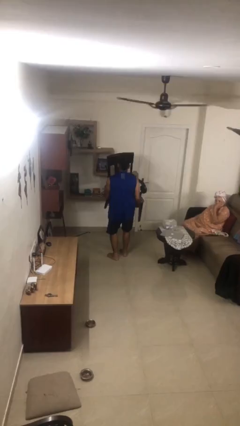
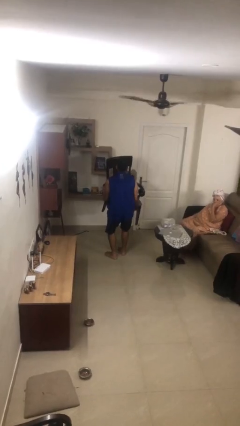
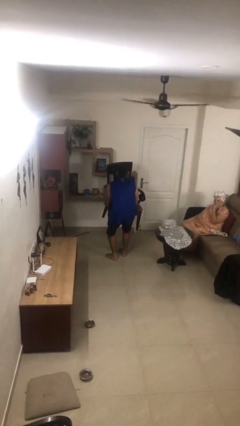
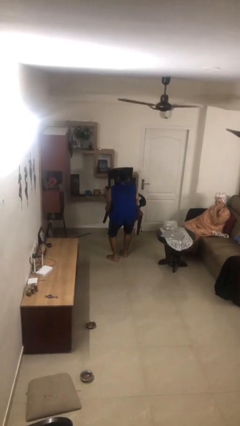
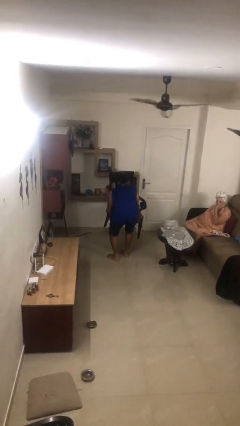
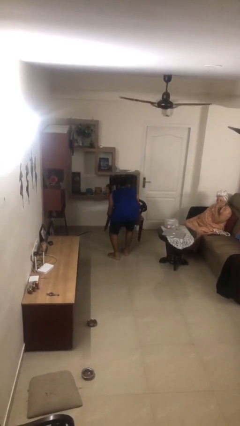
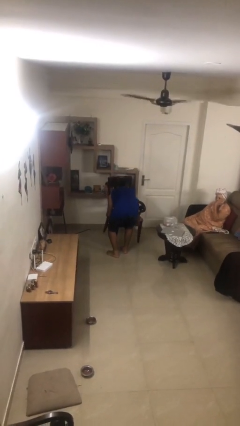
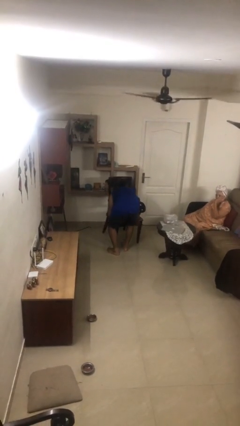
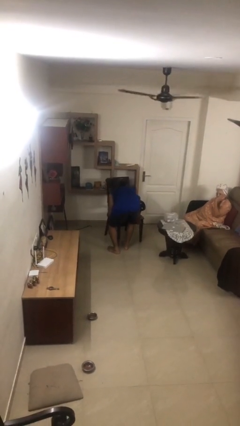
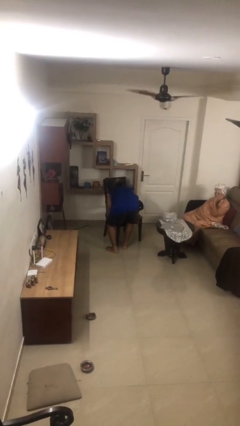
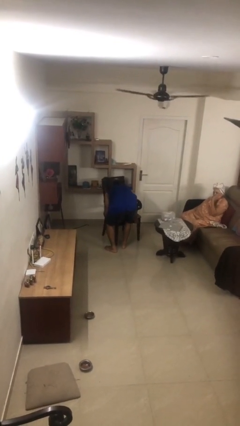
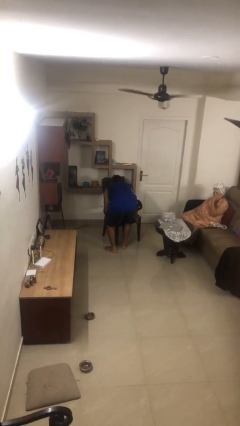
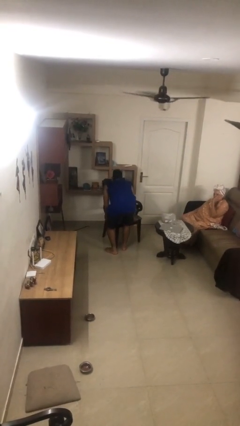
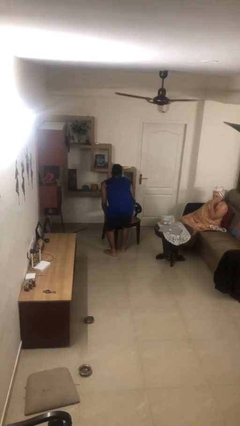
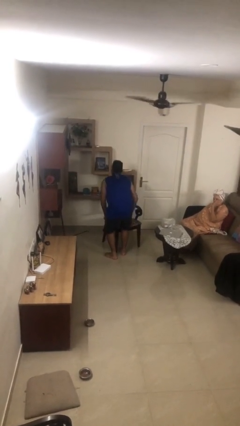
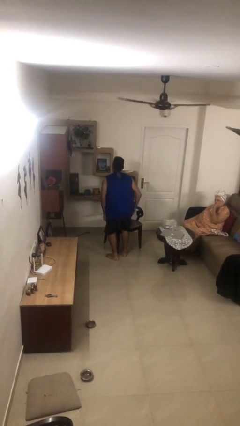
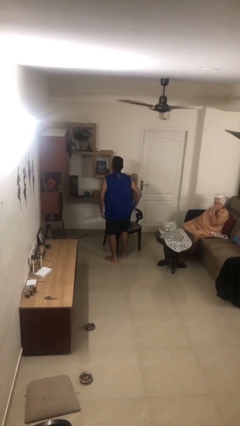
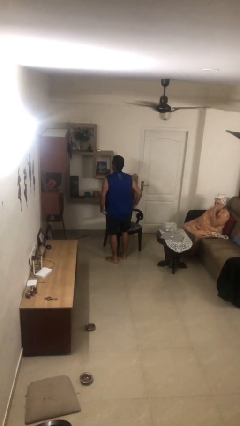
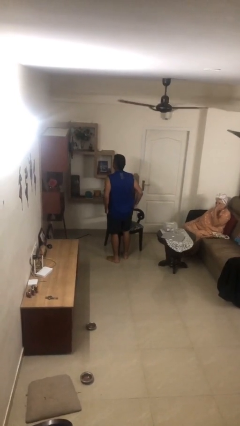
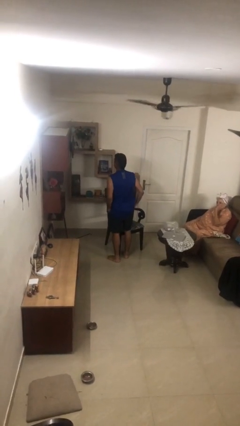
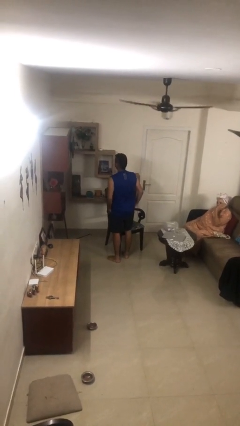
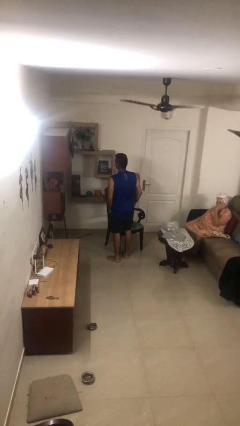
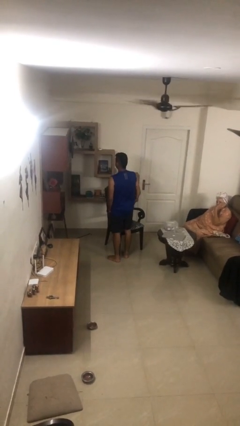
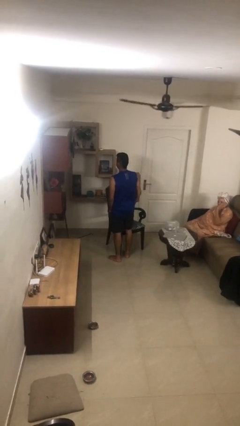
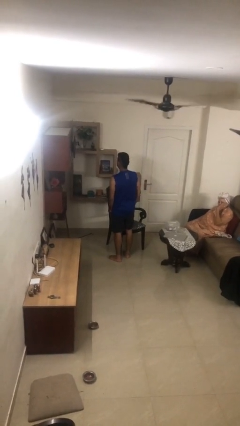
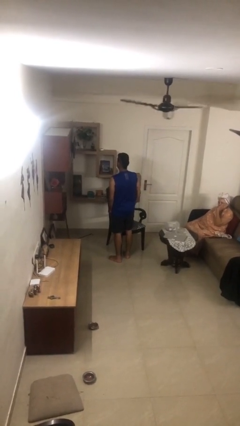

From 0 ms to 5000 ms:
person puts down object on floor

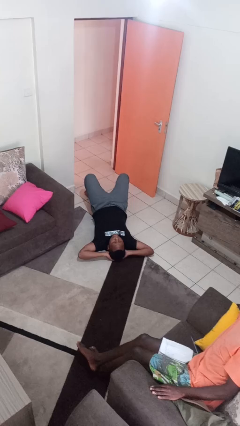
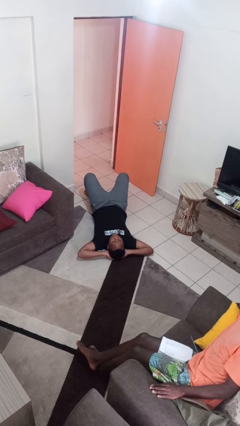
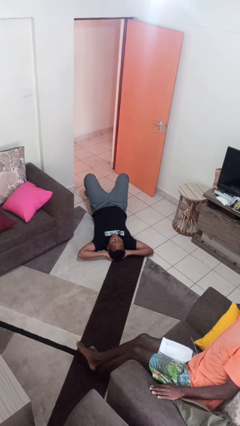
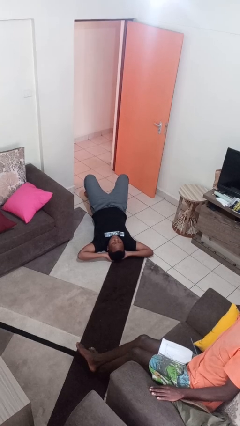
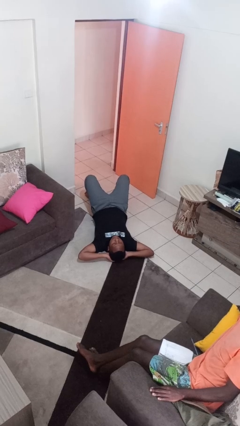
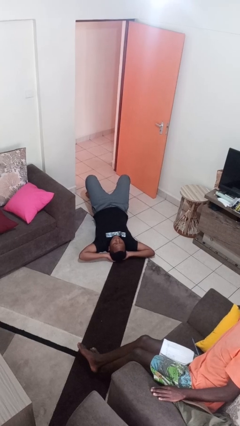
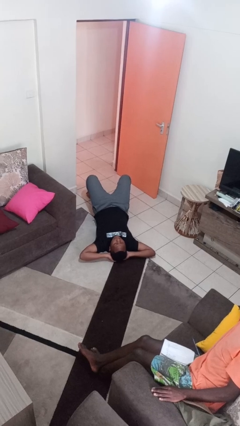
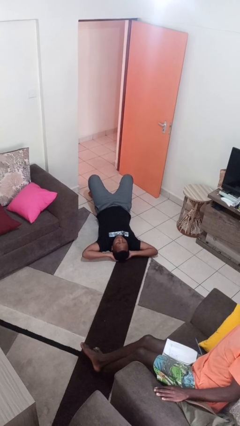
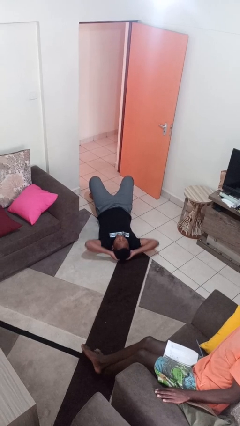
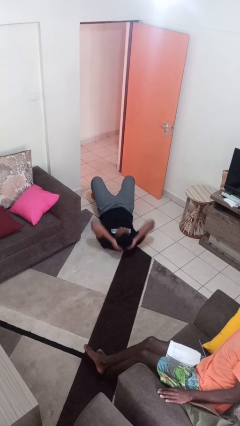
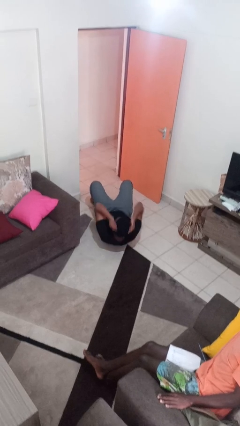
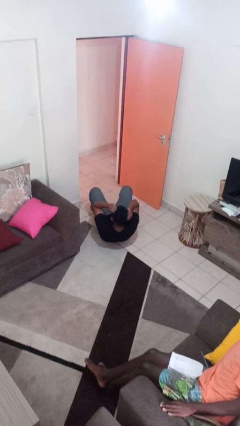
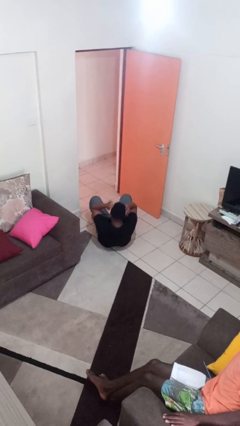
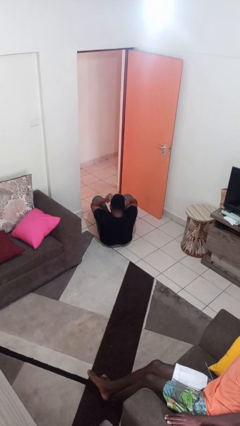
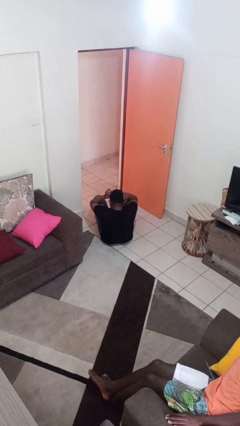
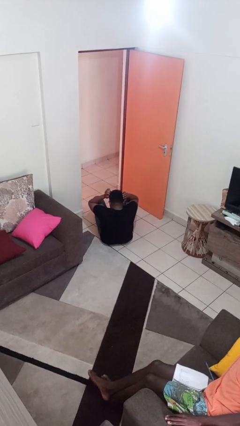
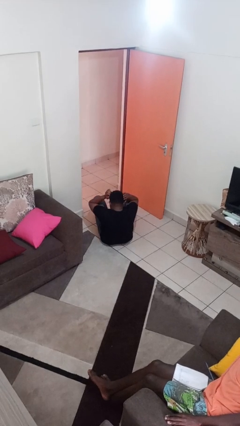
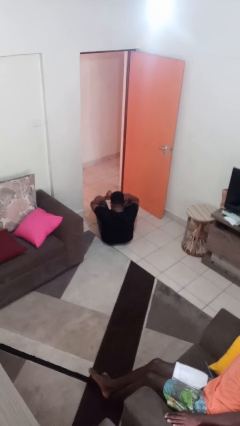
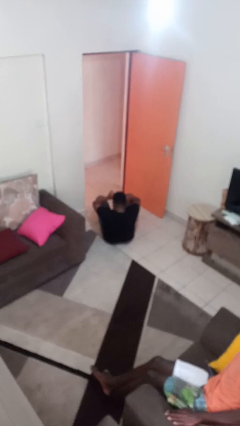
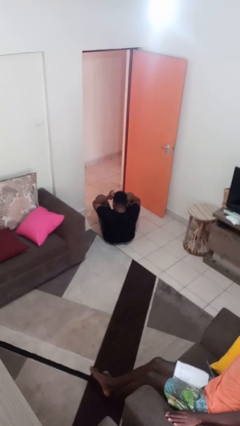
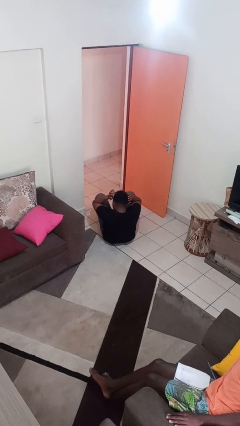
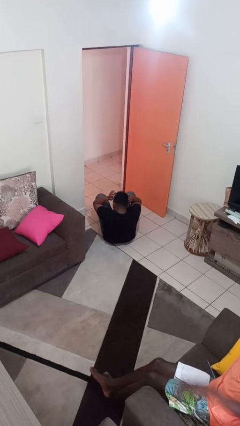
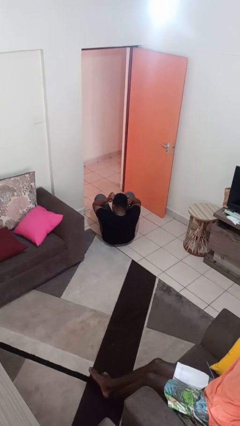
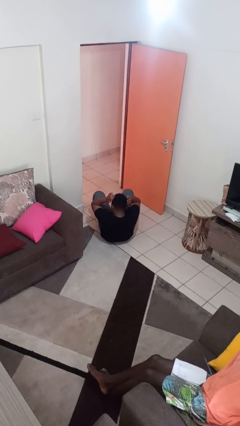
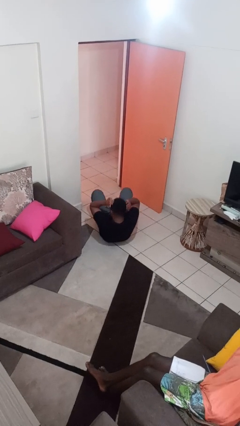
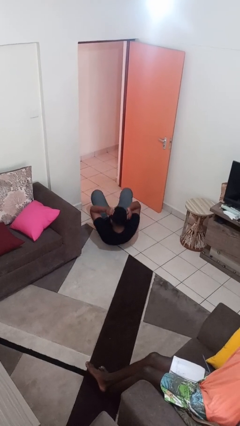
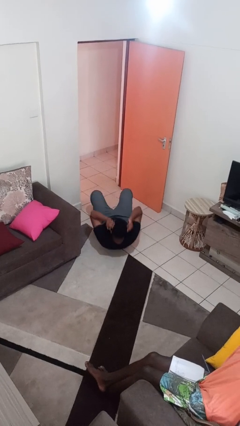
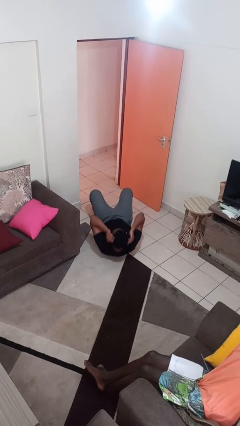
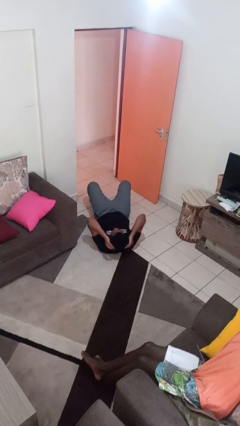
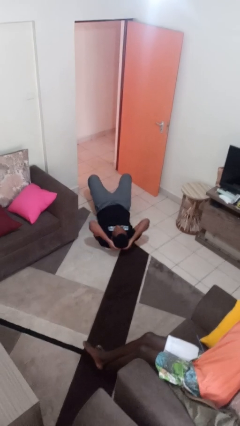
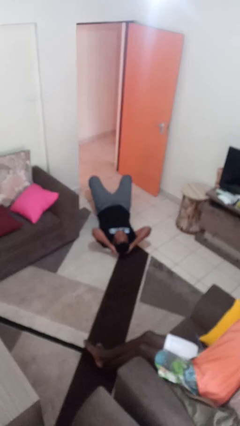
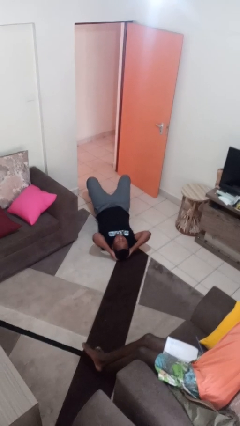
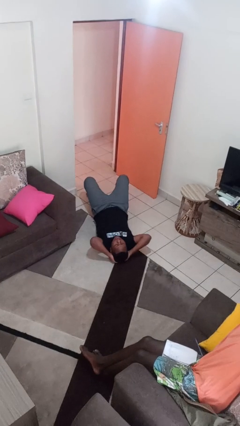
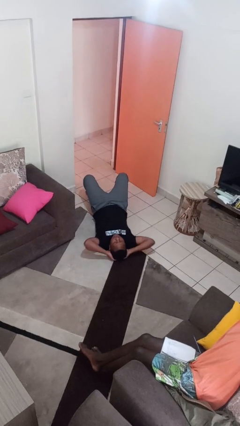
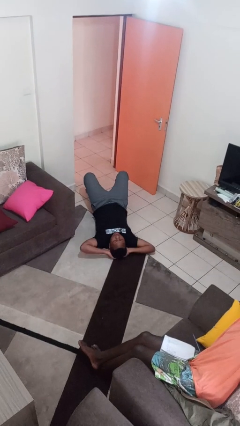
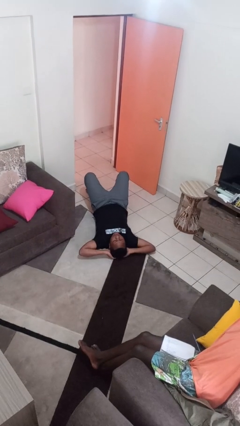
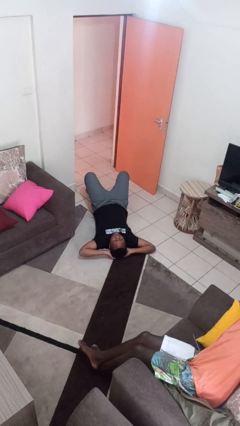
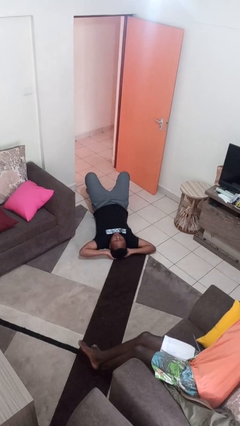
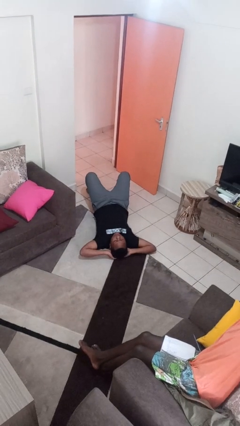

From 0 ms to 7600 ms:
person exercises with situp

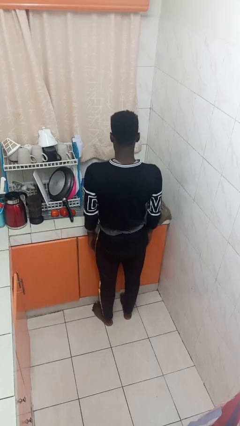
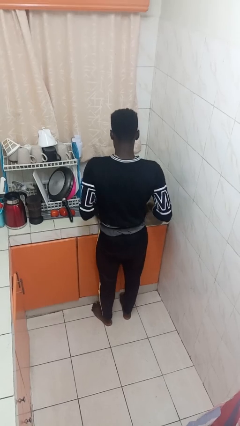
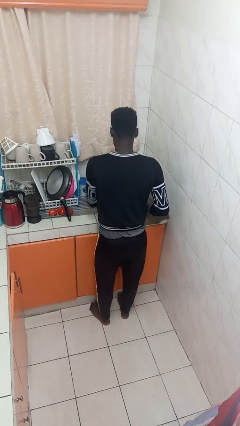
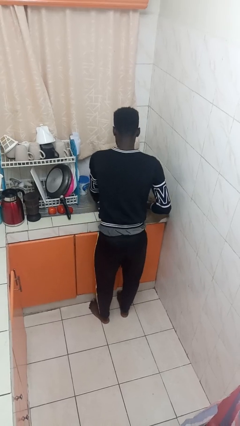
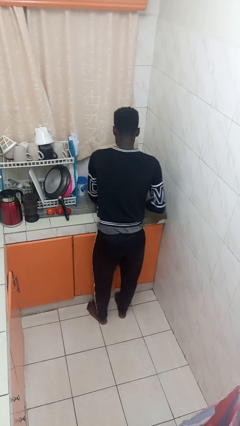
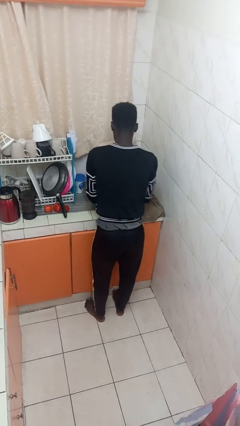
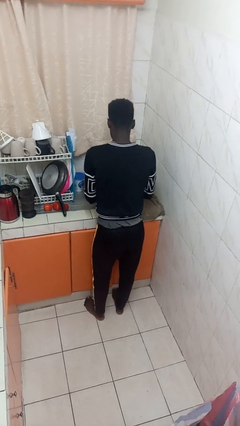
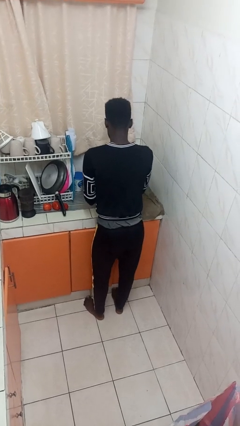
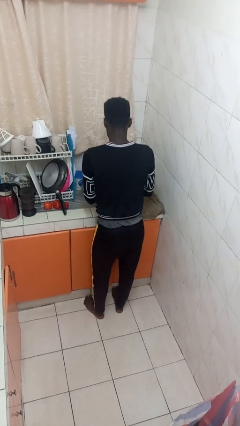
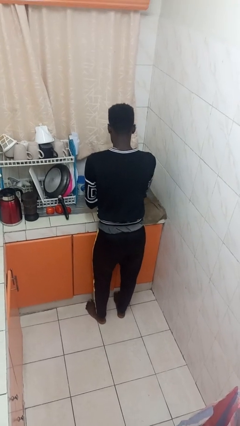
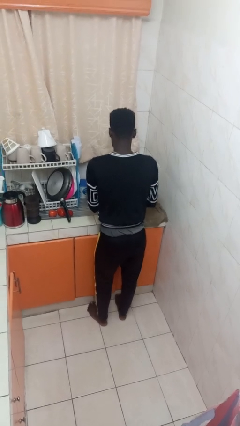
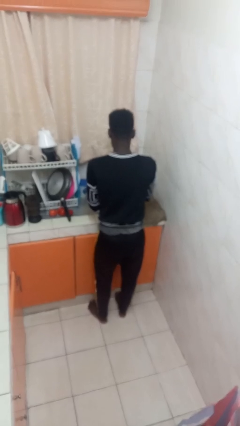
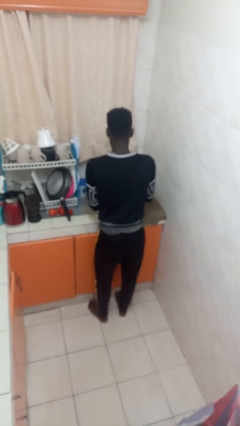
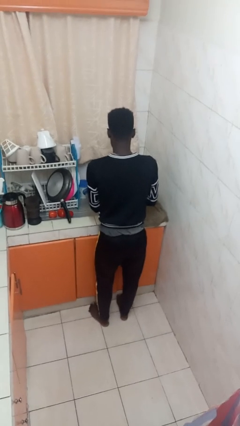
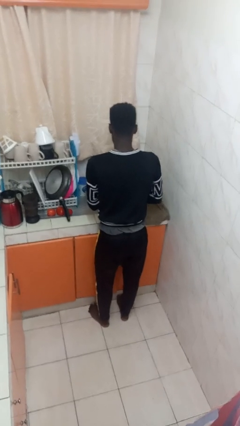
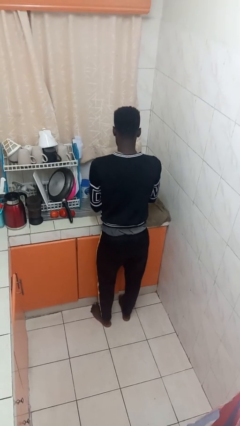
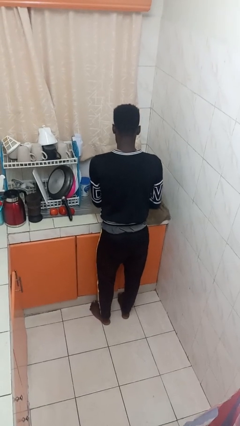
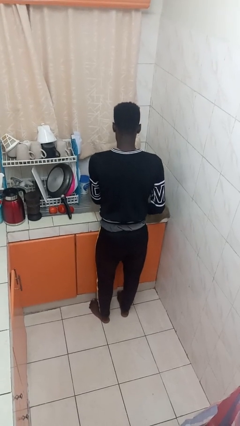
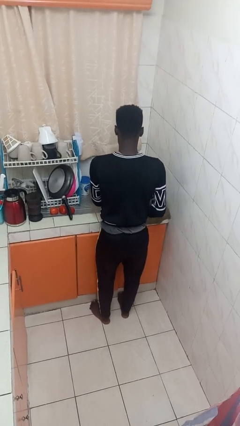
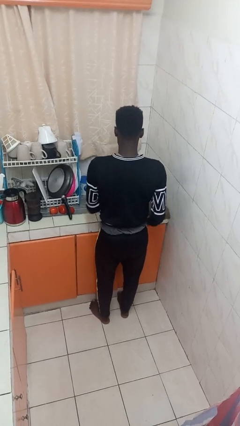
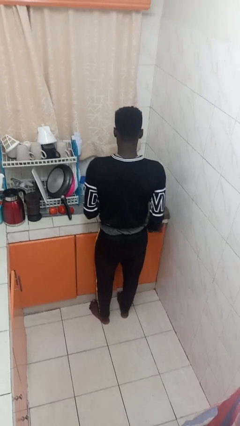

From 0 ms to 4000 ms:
person washes dish

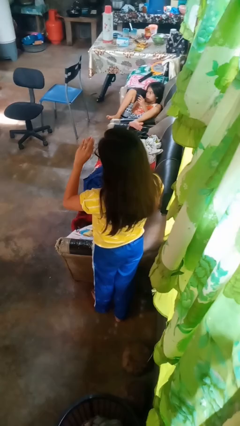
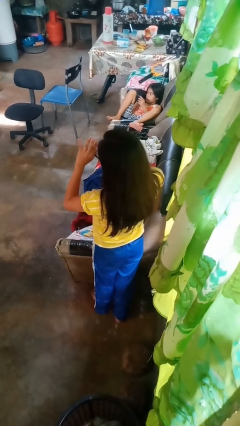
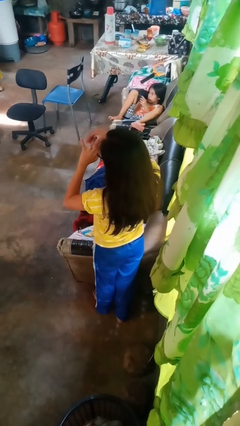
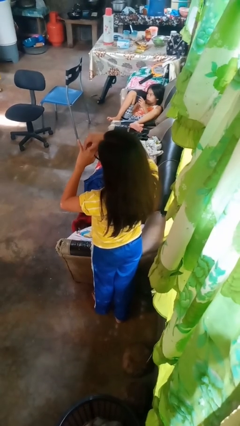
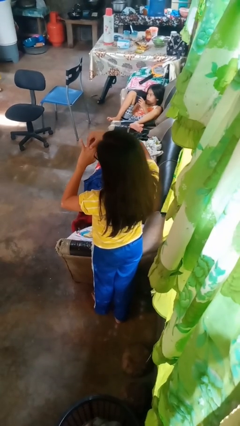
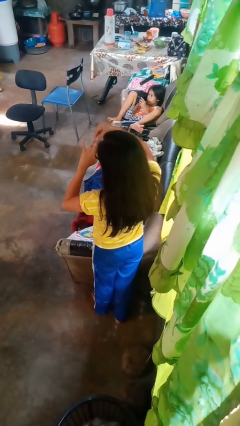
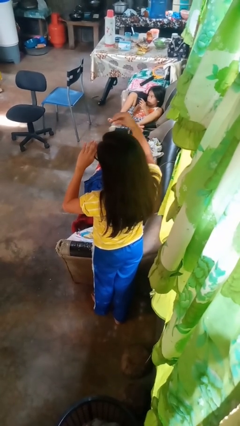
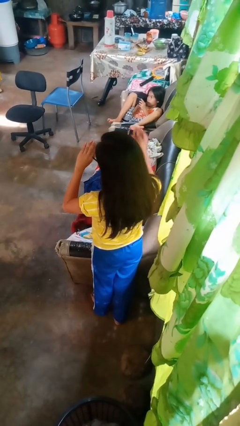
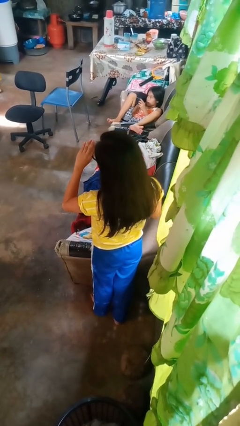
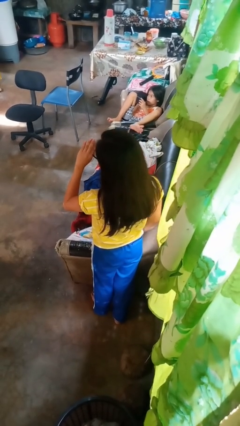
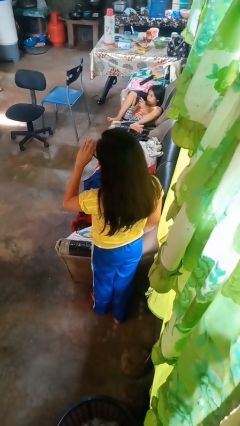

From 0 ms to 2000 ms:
person takes off ring
